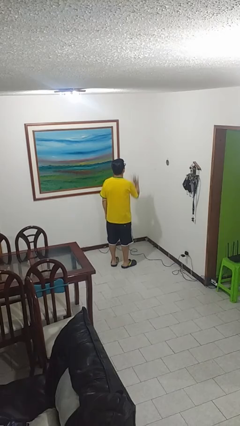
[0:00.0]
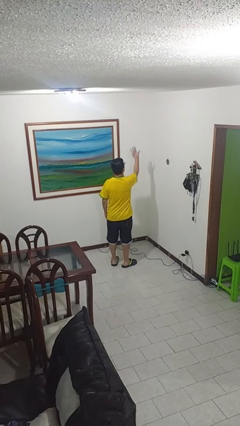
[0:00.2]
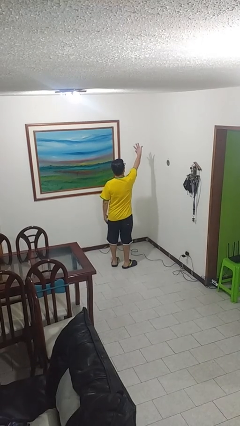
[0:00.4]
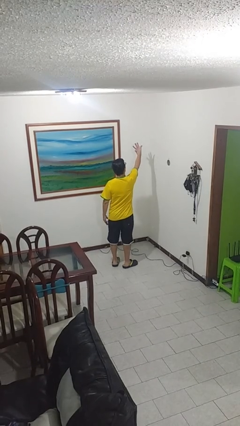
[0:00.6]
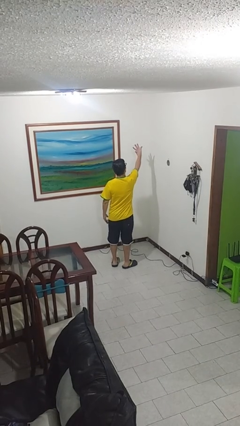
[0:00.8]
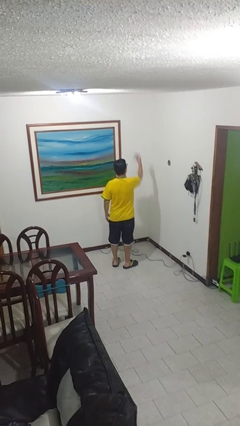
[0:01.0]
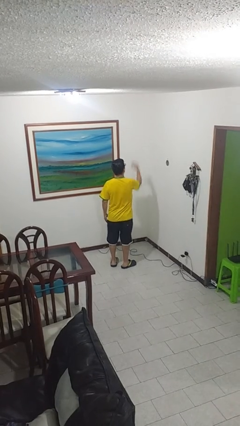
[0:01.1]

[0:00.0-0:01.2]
person gestures number four

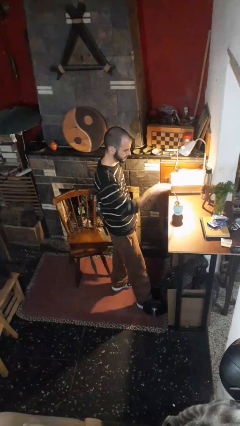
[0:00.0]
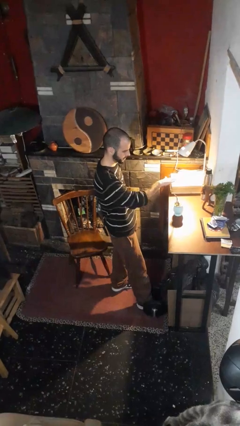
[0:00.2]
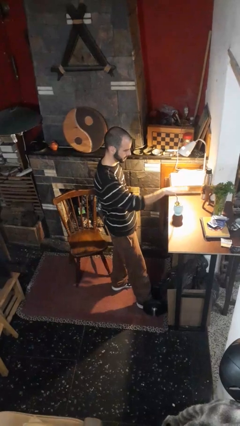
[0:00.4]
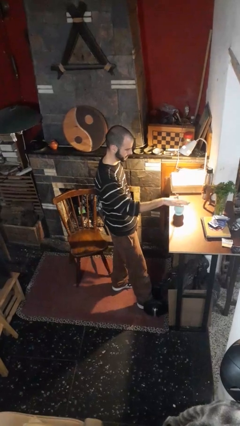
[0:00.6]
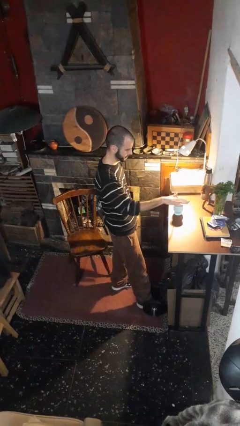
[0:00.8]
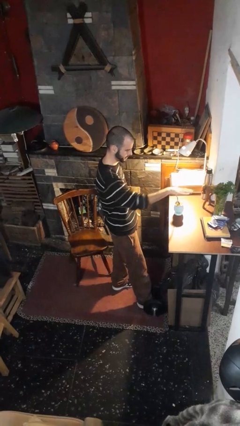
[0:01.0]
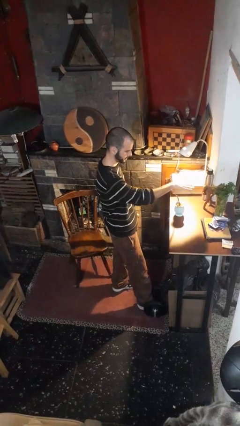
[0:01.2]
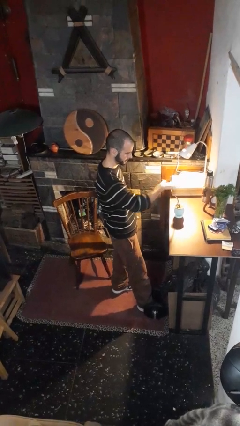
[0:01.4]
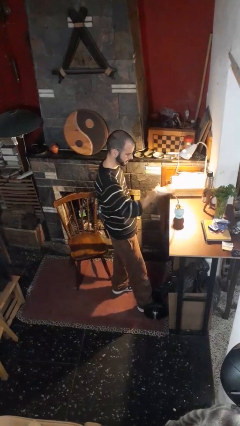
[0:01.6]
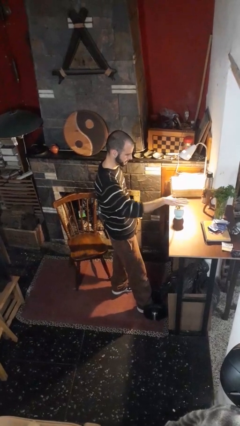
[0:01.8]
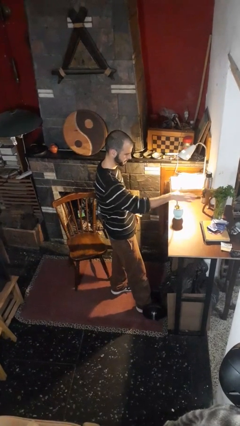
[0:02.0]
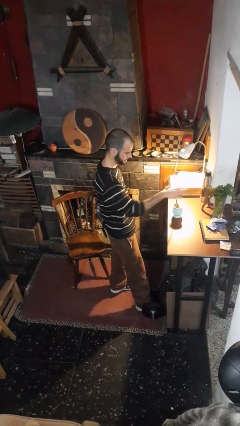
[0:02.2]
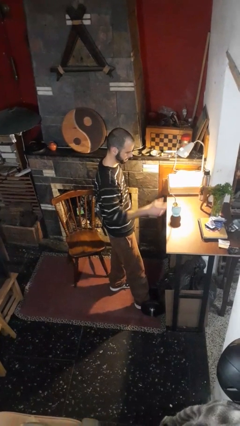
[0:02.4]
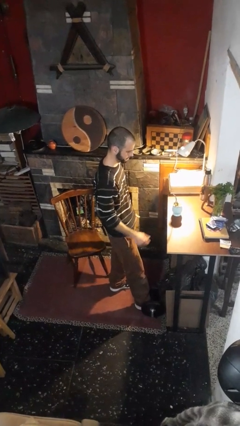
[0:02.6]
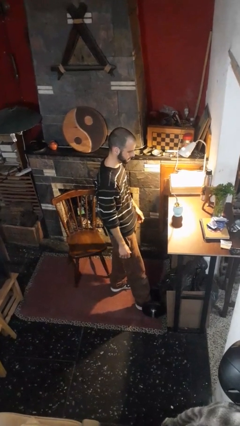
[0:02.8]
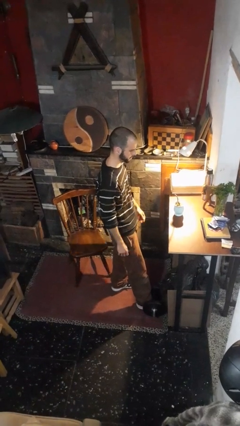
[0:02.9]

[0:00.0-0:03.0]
person waves hand over object

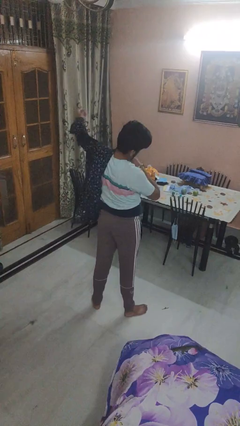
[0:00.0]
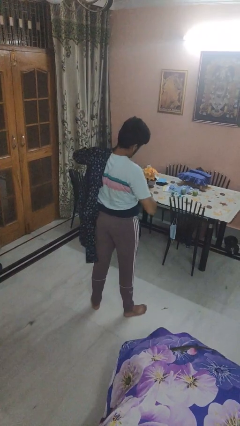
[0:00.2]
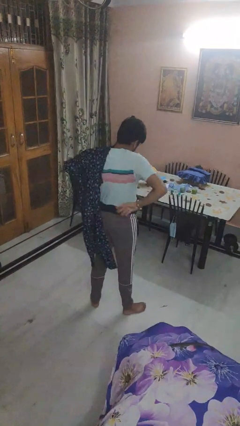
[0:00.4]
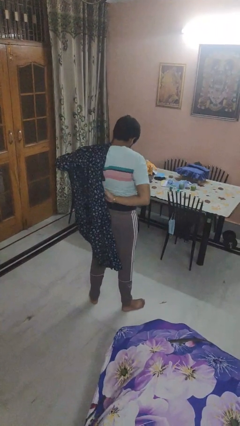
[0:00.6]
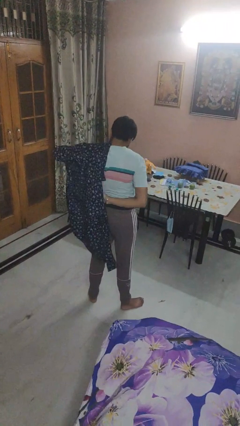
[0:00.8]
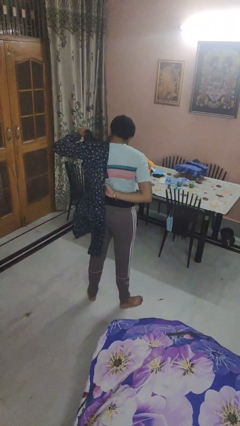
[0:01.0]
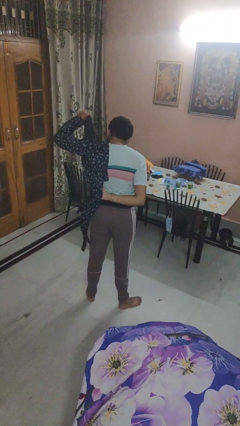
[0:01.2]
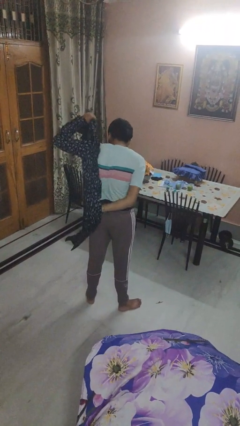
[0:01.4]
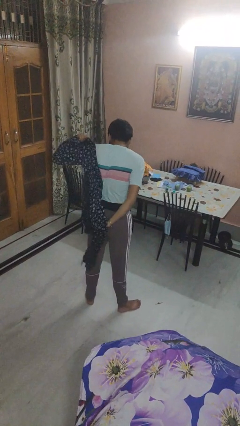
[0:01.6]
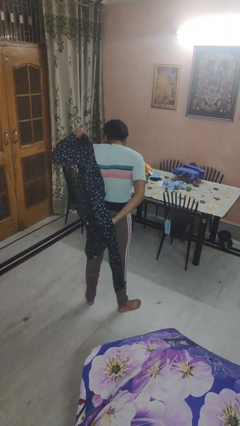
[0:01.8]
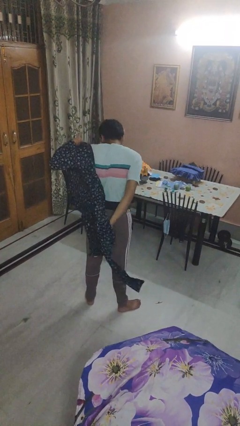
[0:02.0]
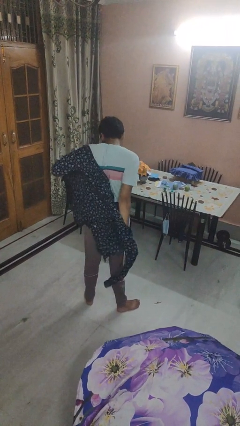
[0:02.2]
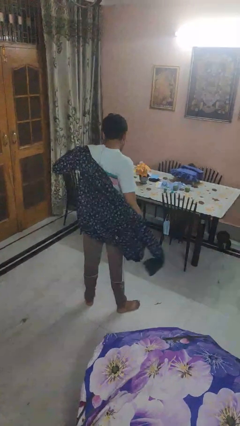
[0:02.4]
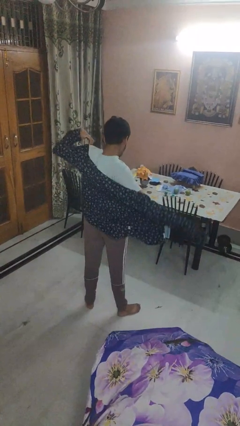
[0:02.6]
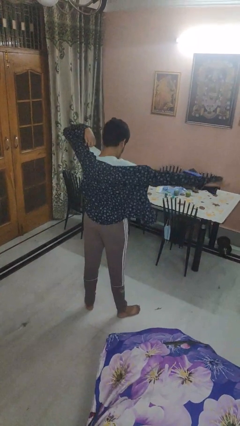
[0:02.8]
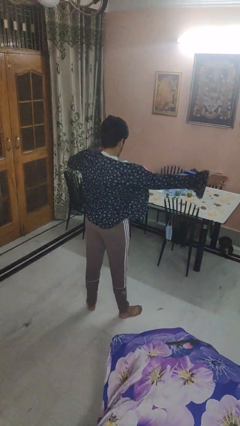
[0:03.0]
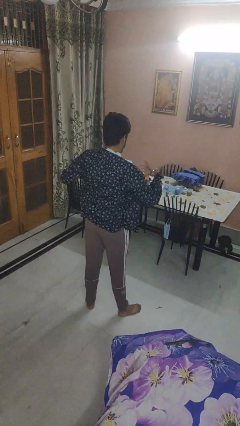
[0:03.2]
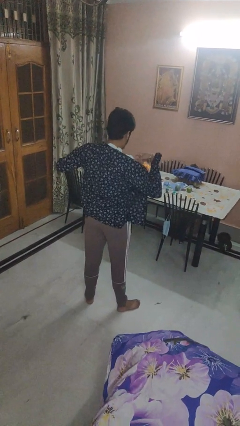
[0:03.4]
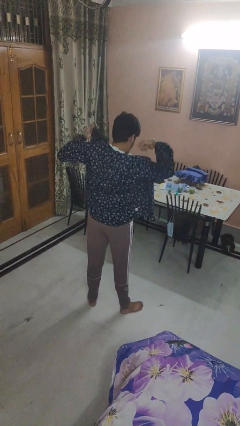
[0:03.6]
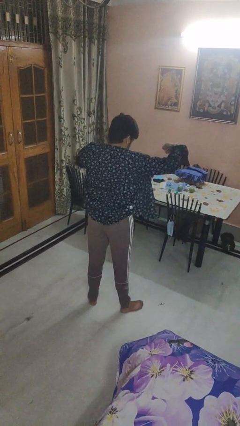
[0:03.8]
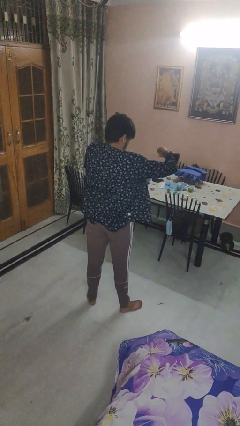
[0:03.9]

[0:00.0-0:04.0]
person puts on shirt

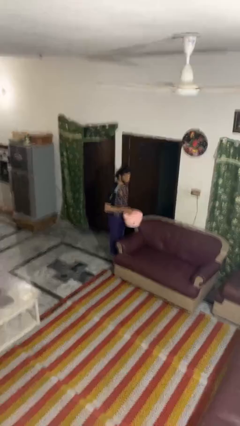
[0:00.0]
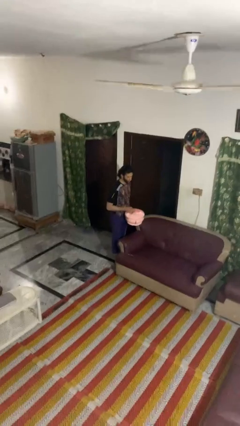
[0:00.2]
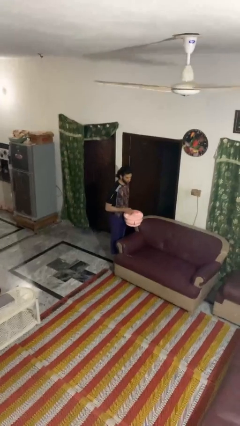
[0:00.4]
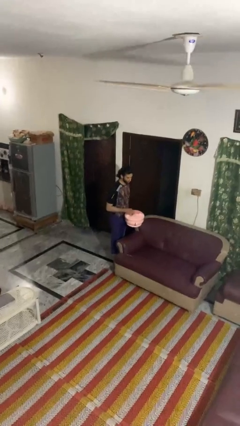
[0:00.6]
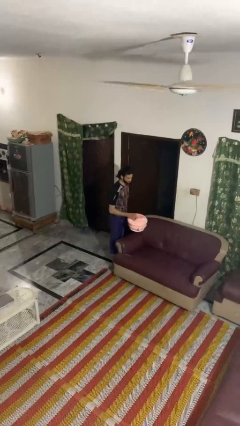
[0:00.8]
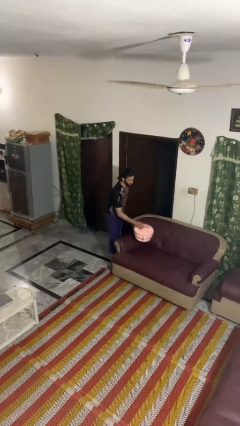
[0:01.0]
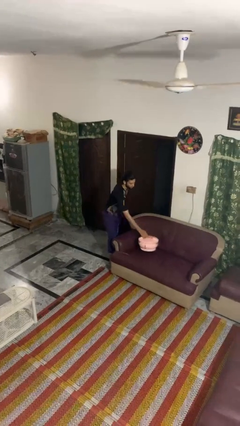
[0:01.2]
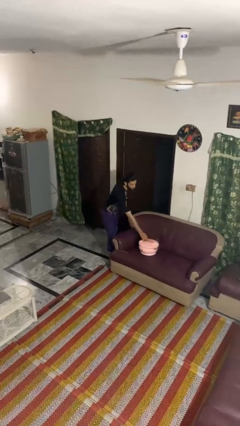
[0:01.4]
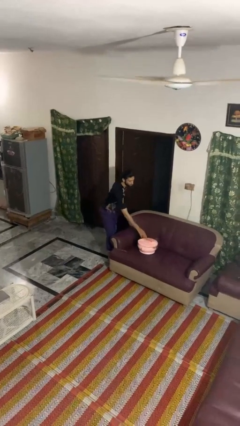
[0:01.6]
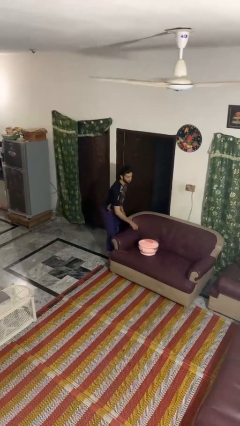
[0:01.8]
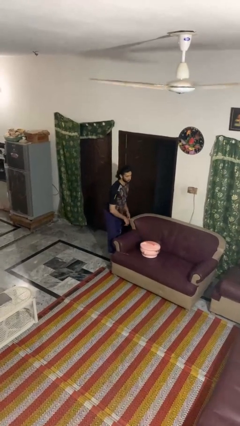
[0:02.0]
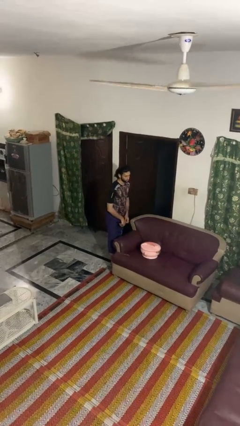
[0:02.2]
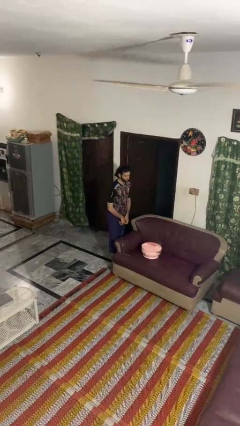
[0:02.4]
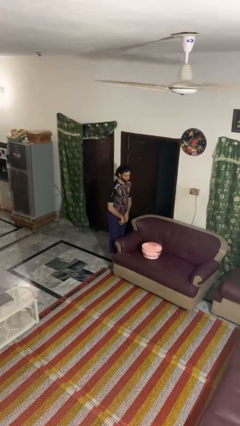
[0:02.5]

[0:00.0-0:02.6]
person puts down object on couch

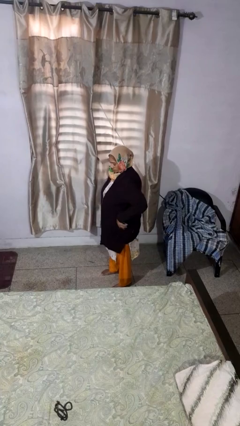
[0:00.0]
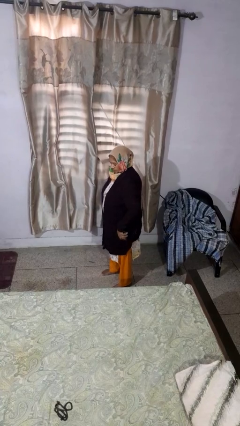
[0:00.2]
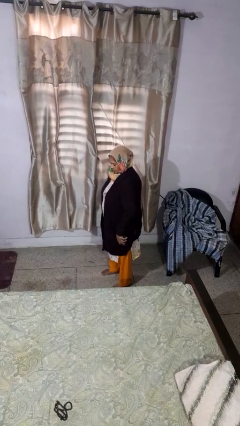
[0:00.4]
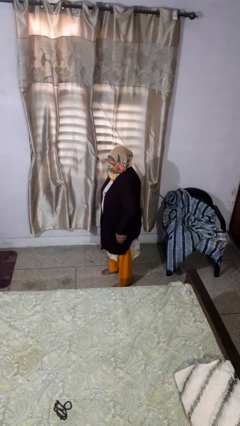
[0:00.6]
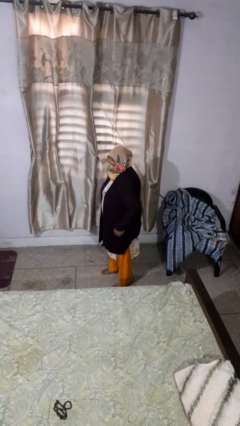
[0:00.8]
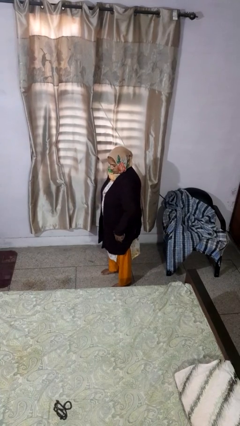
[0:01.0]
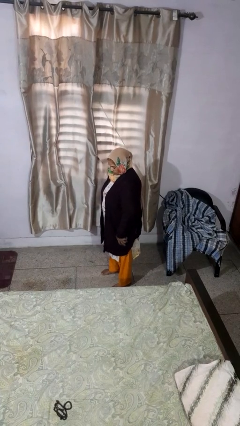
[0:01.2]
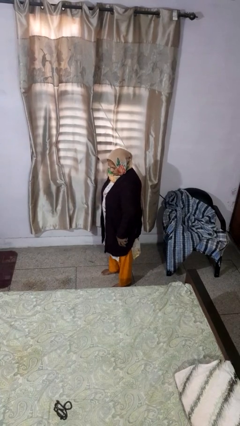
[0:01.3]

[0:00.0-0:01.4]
person puts phone into pocket

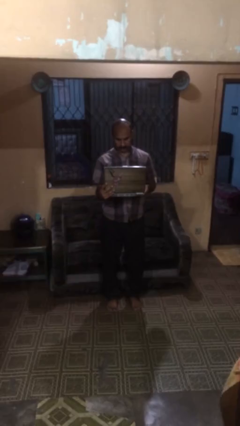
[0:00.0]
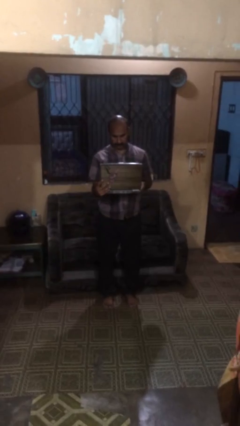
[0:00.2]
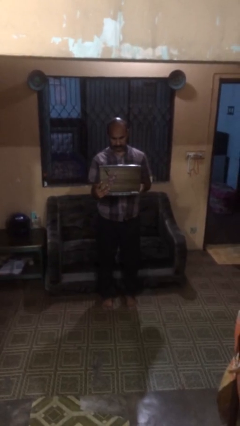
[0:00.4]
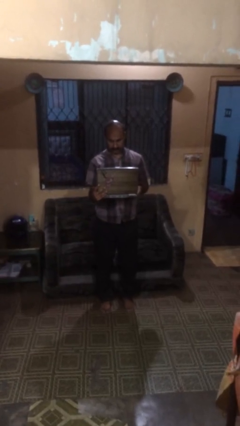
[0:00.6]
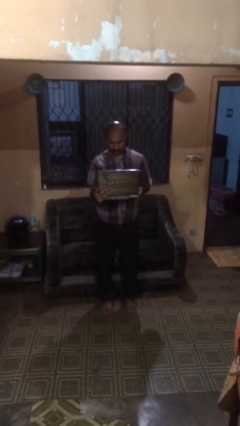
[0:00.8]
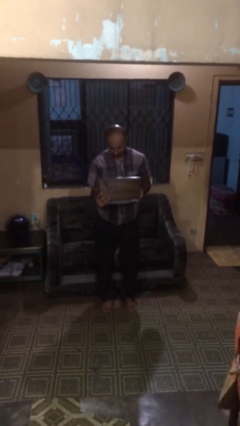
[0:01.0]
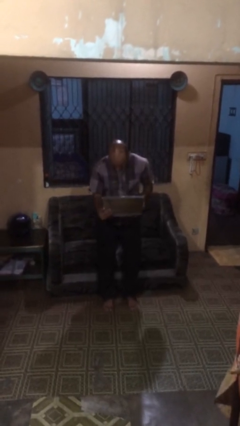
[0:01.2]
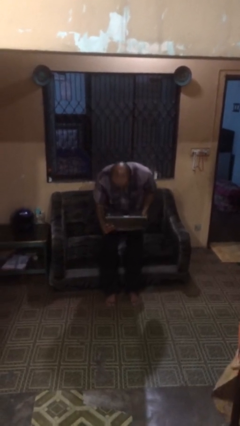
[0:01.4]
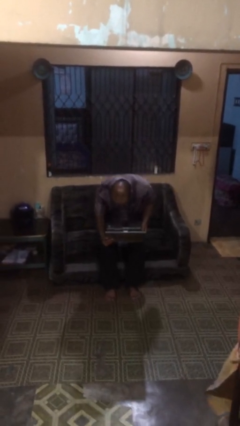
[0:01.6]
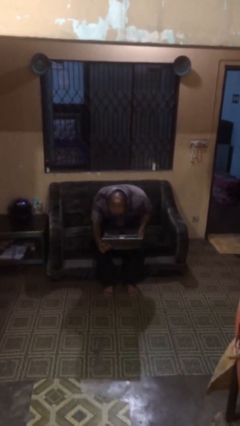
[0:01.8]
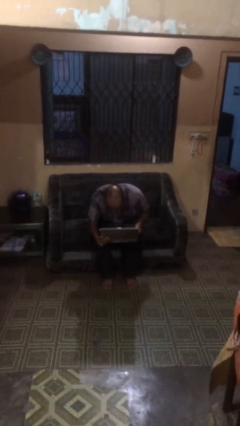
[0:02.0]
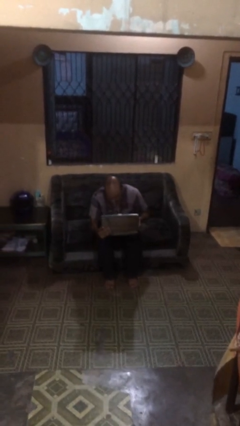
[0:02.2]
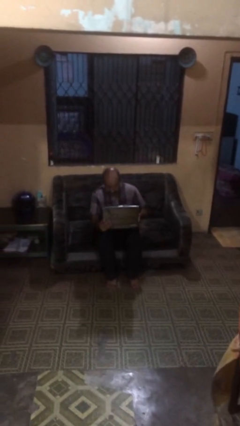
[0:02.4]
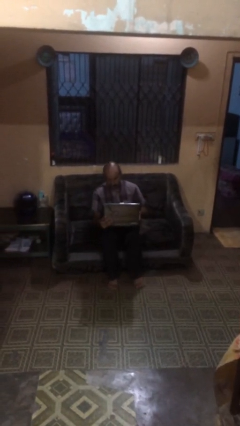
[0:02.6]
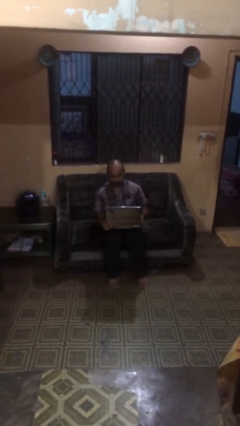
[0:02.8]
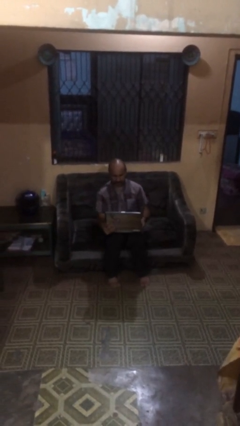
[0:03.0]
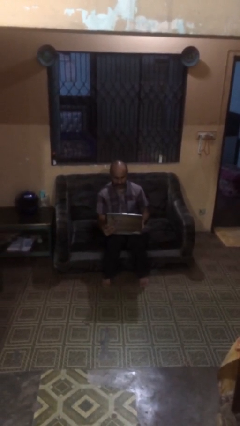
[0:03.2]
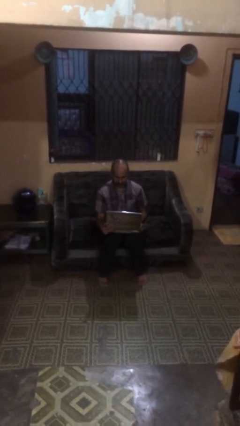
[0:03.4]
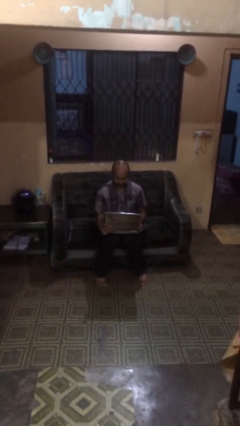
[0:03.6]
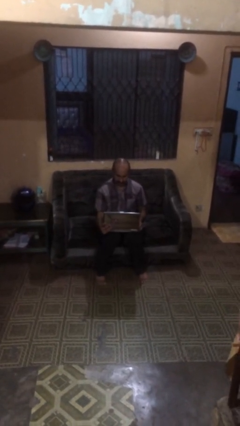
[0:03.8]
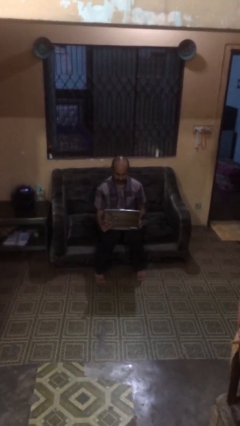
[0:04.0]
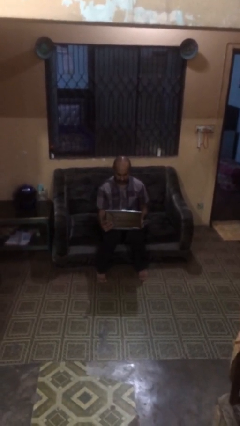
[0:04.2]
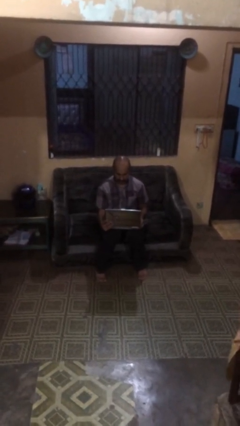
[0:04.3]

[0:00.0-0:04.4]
person sits down

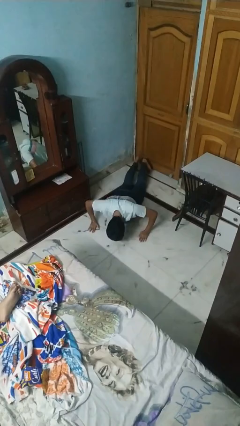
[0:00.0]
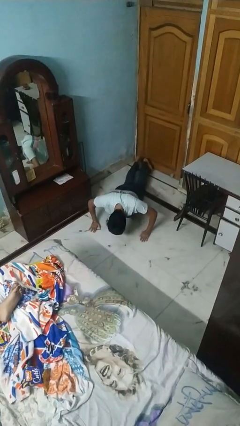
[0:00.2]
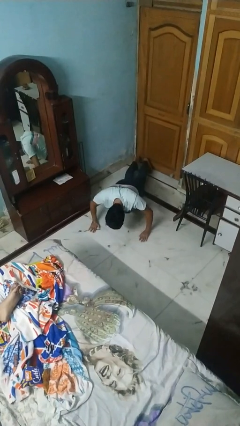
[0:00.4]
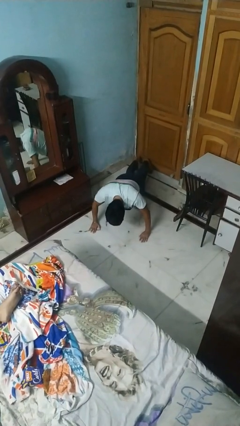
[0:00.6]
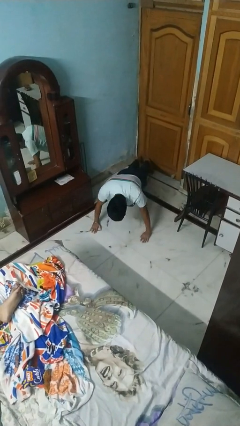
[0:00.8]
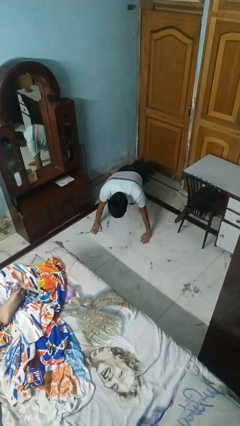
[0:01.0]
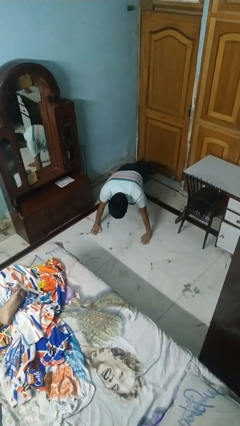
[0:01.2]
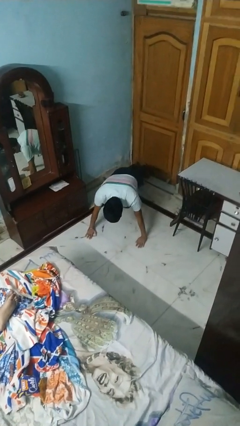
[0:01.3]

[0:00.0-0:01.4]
person exercises with pushup
